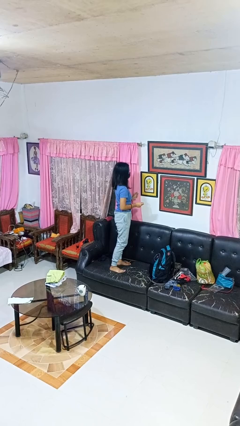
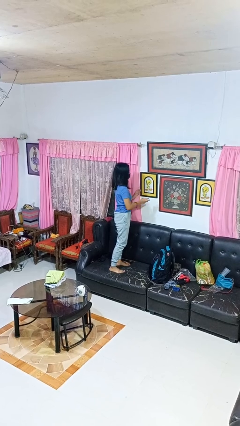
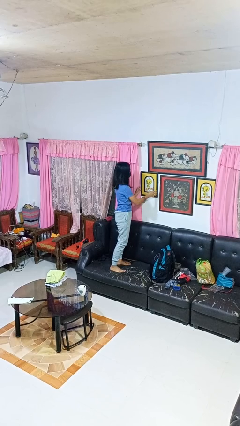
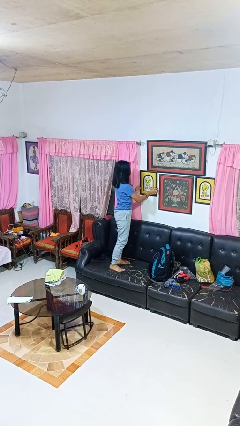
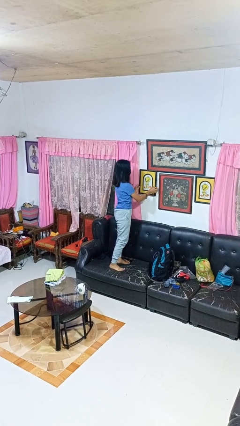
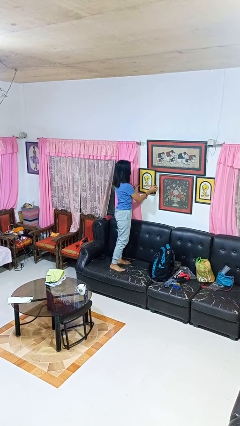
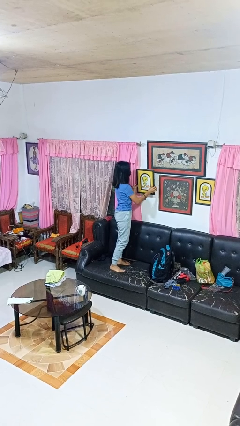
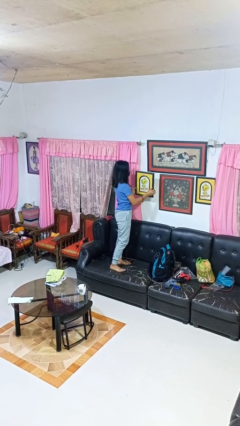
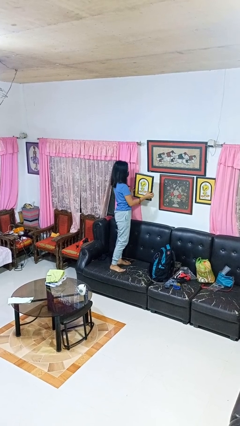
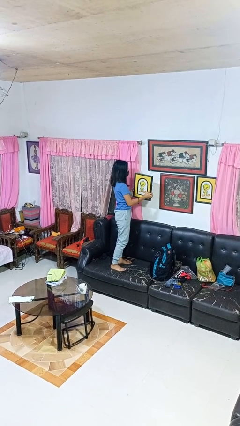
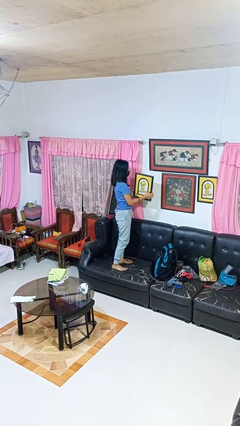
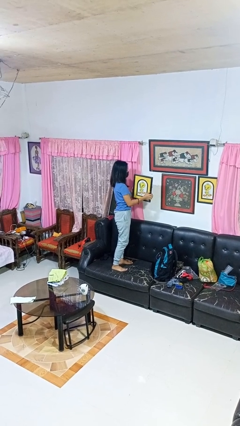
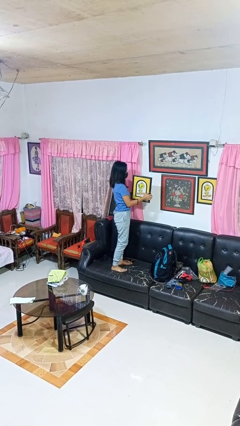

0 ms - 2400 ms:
person takes down picture frame

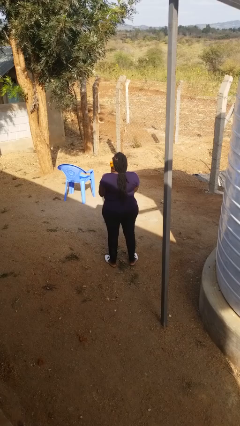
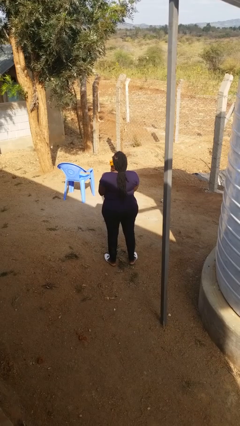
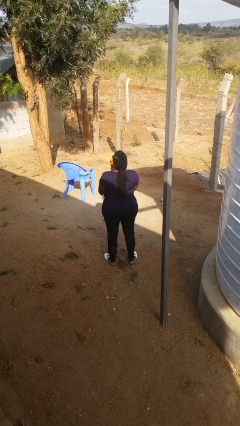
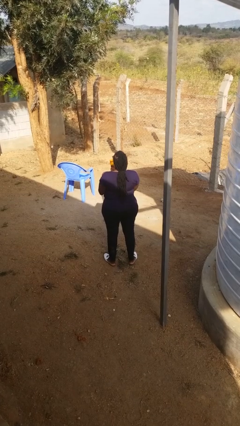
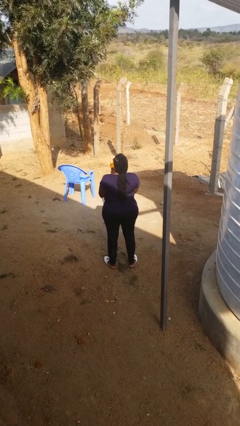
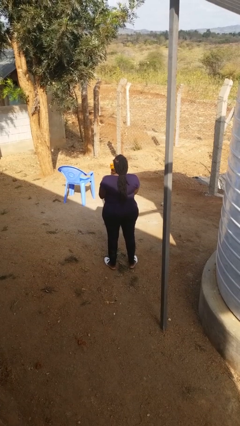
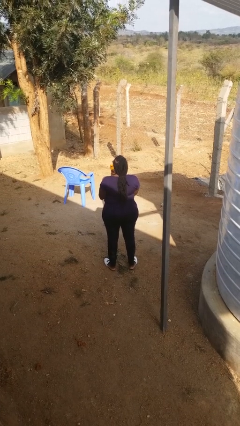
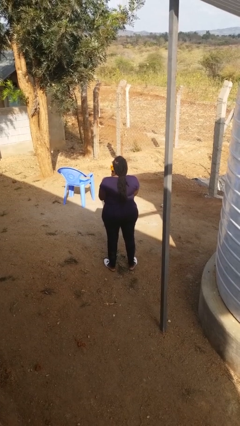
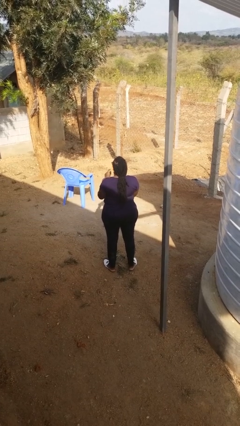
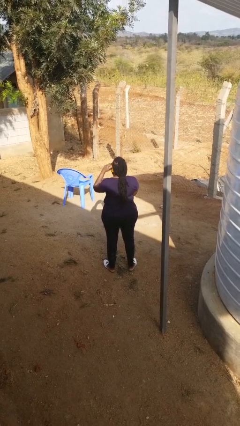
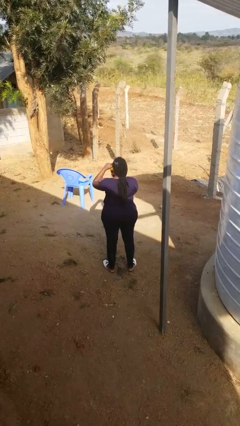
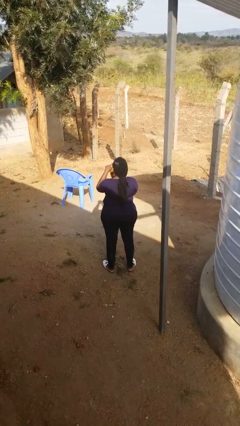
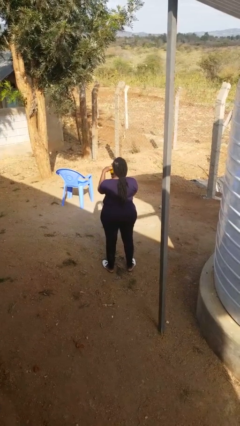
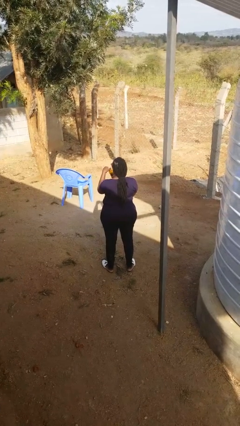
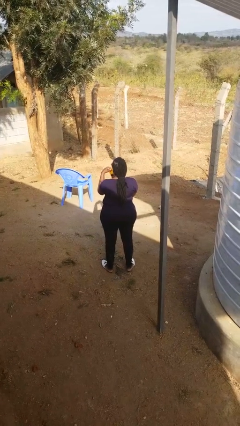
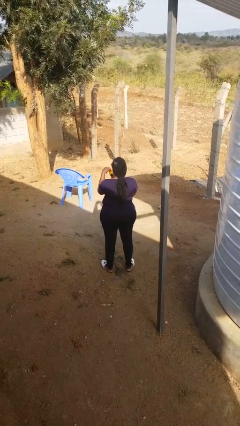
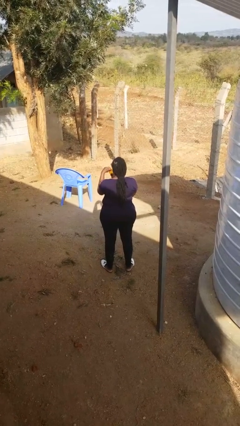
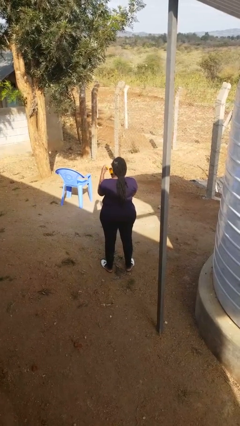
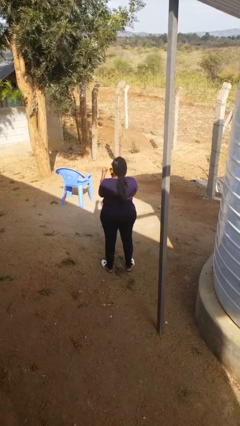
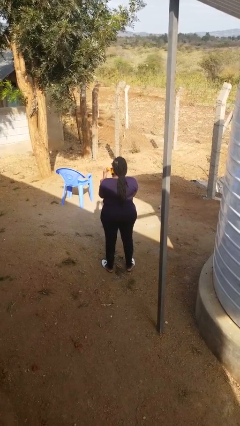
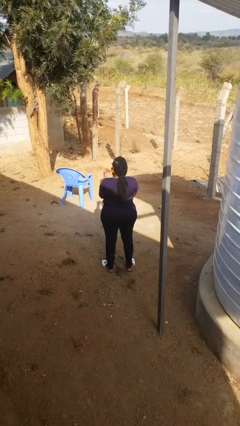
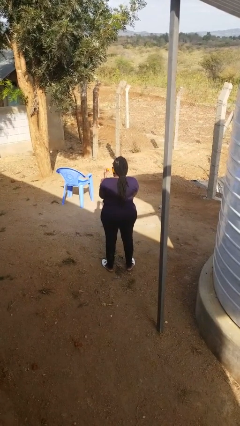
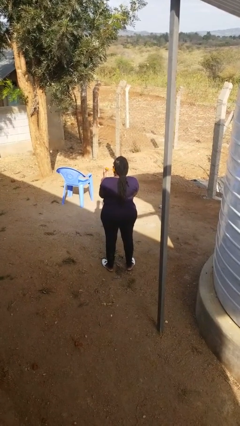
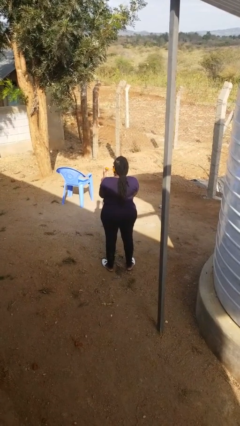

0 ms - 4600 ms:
person opens jar

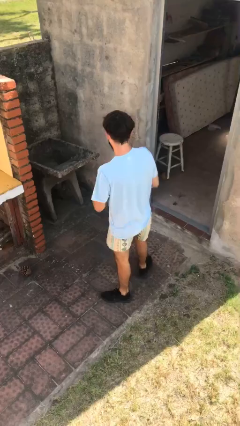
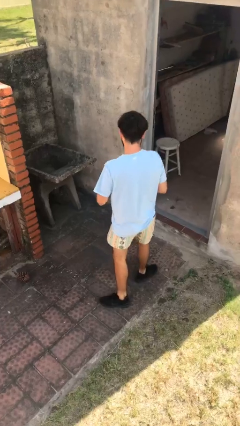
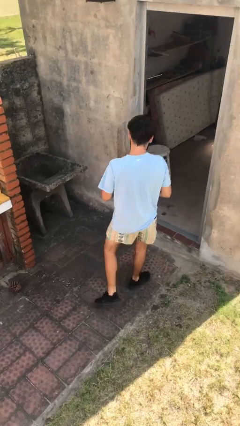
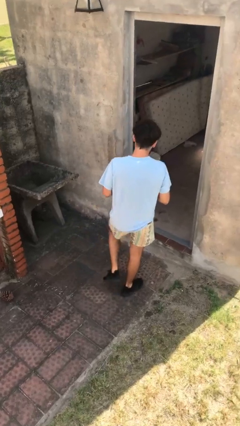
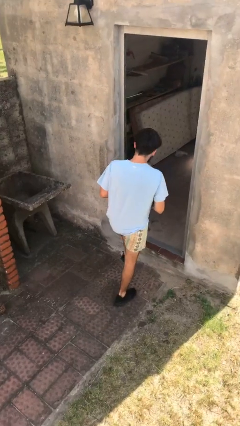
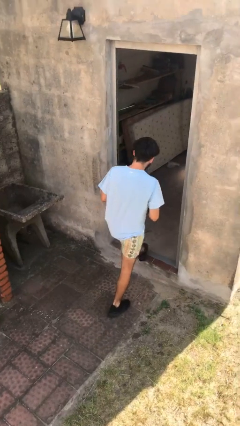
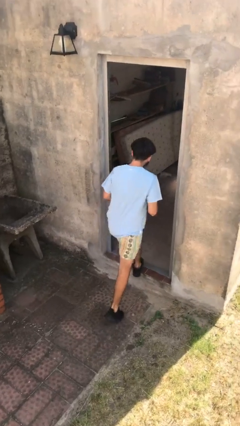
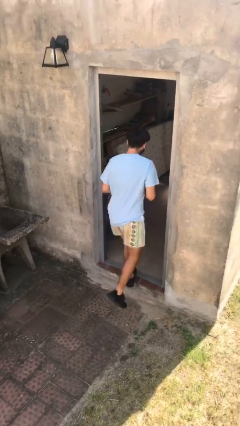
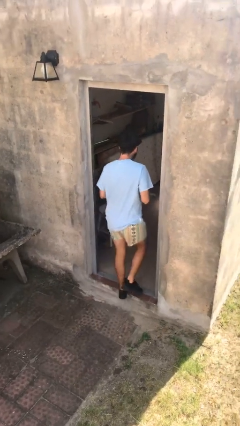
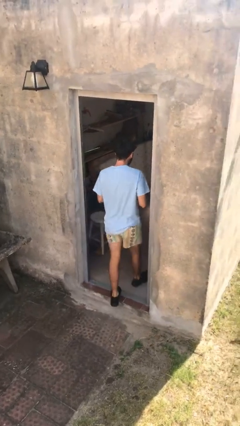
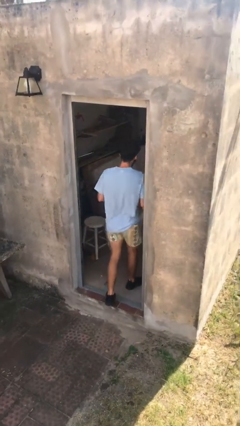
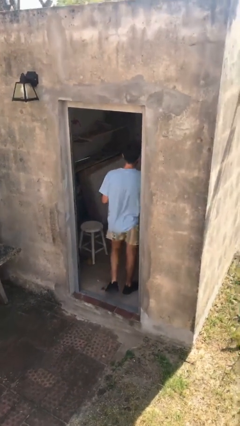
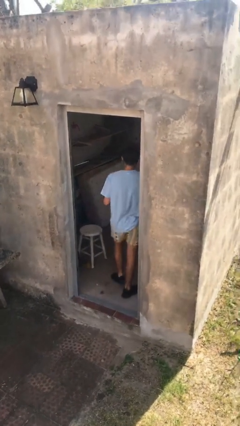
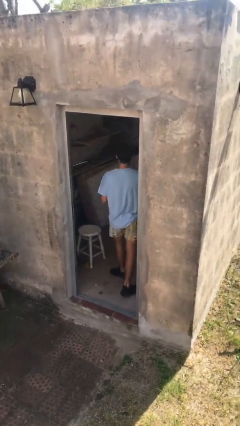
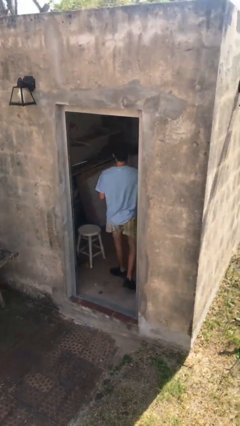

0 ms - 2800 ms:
person exits scene through structure

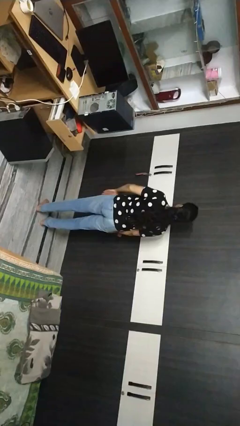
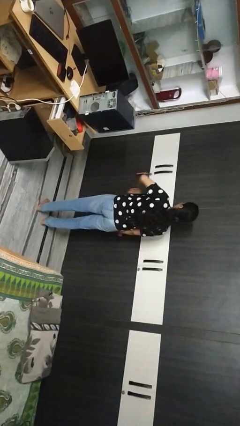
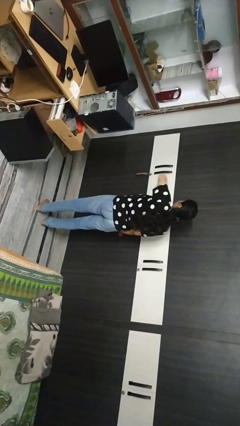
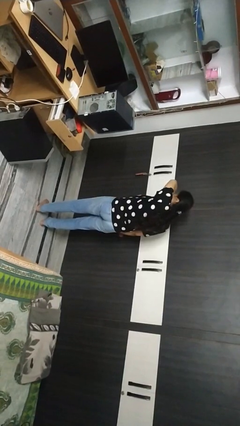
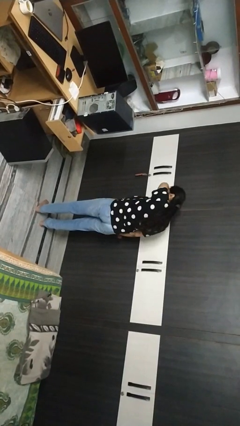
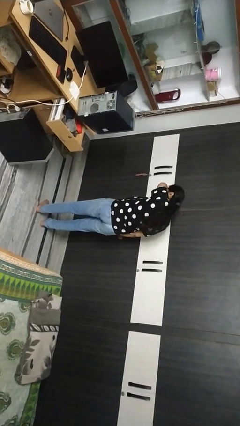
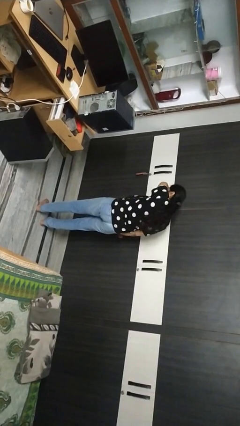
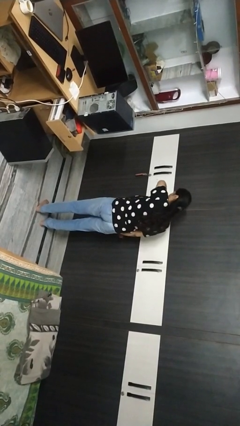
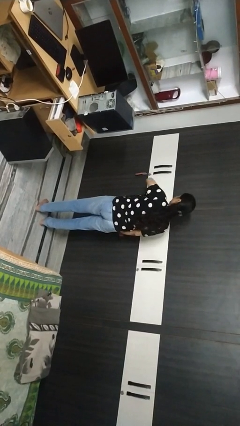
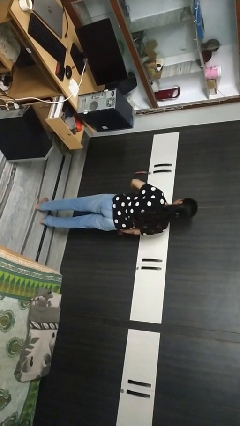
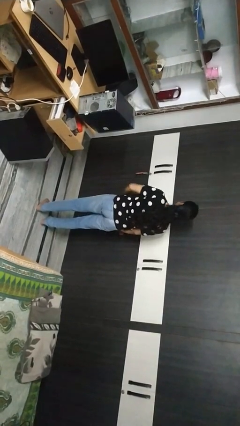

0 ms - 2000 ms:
person sneezes into arm

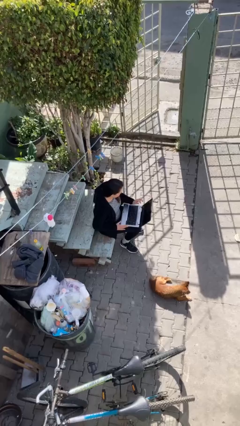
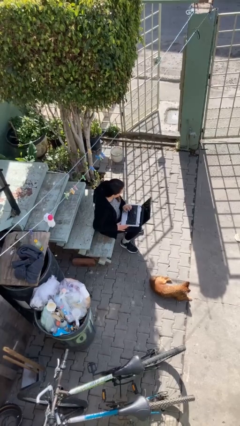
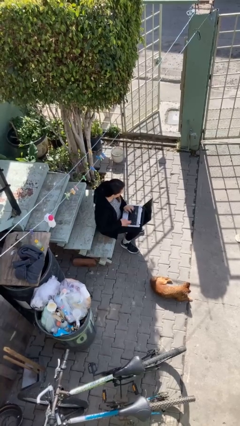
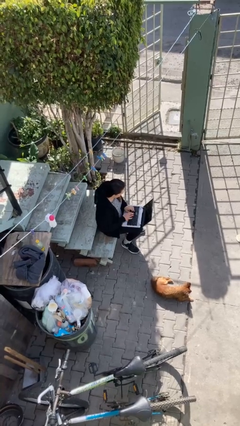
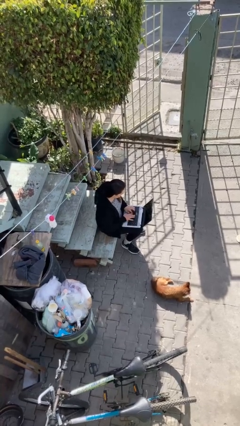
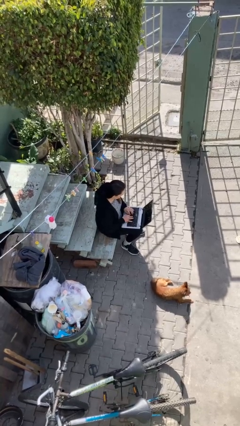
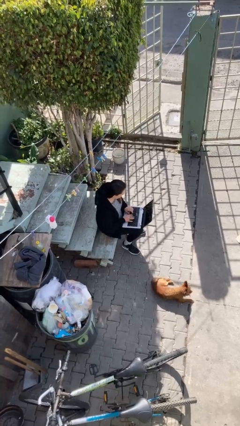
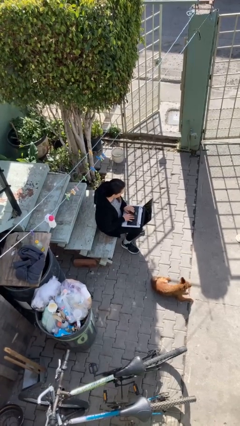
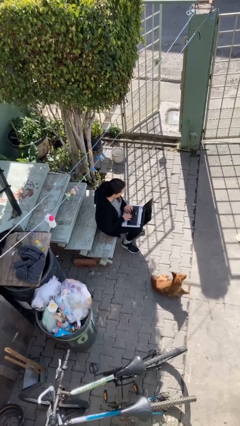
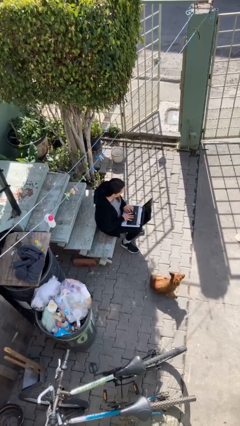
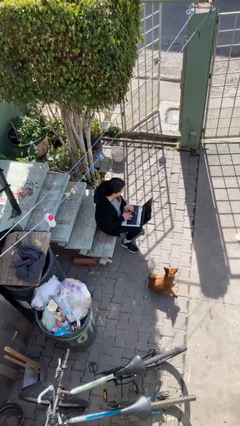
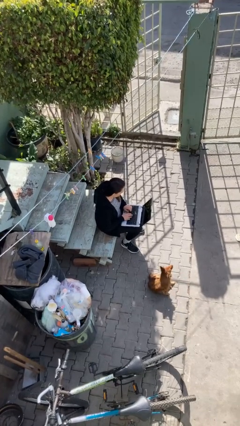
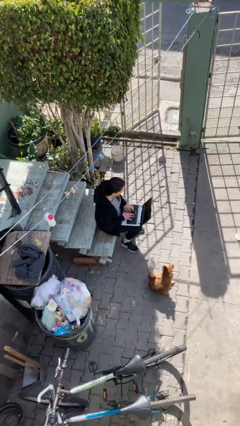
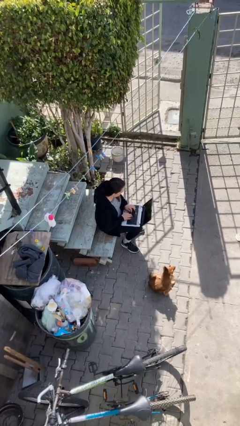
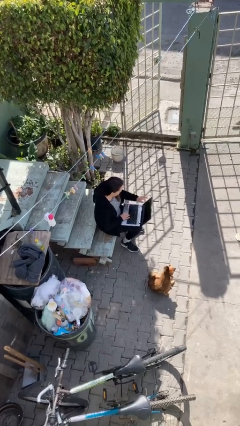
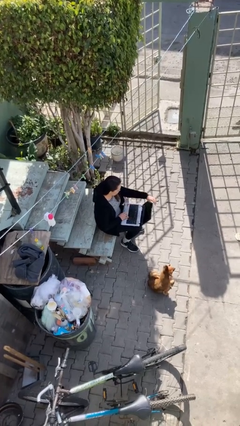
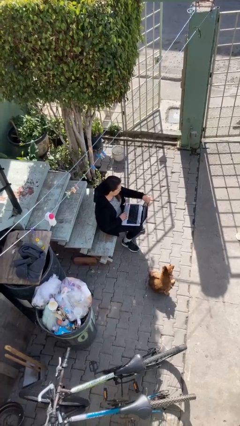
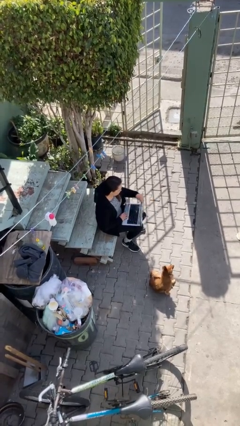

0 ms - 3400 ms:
person interacts with laptop

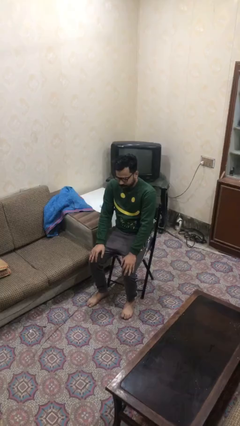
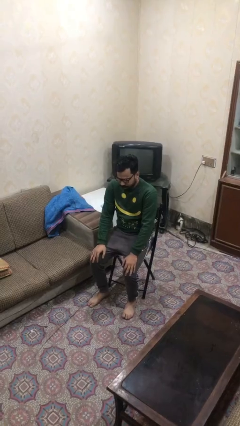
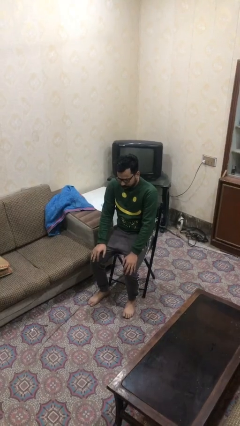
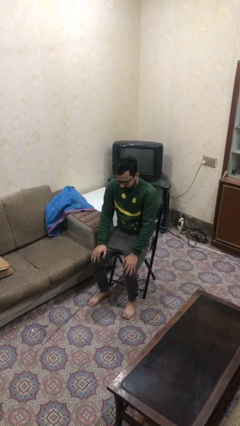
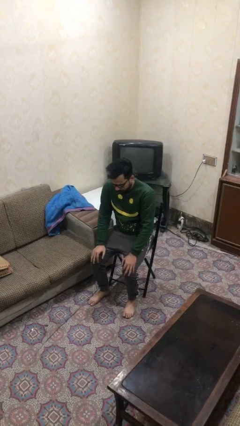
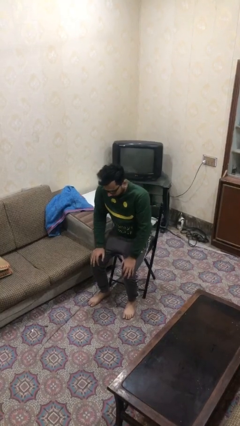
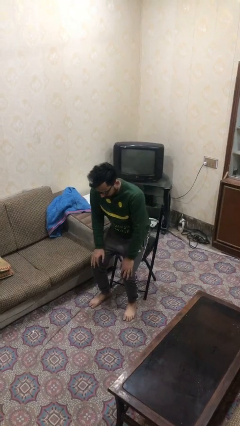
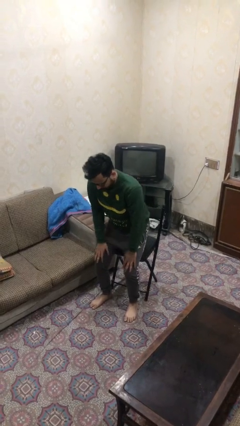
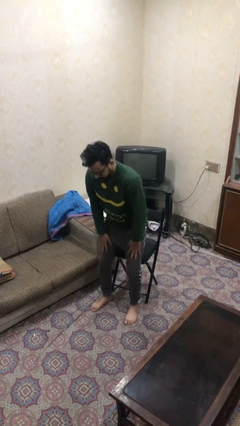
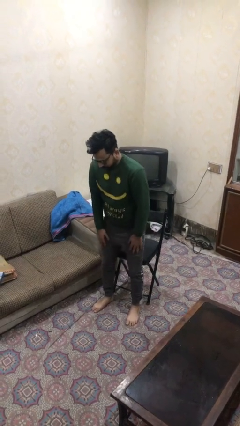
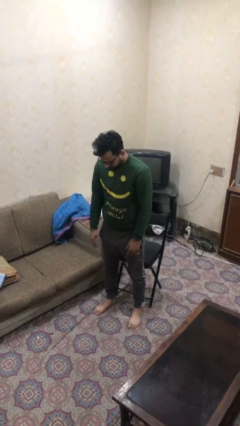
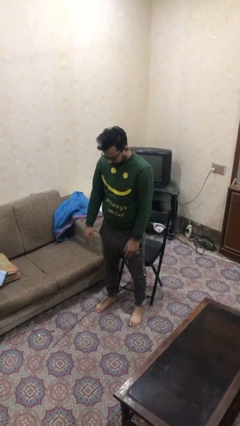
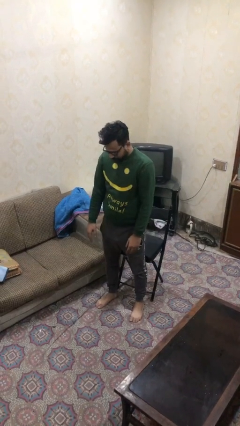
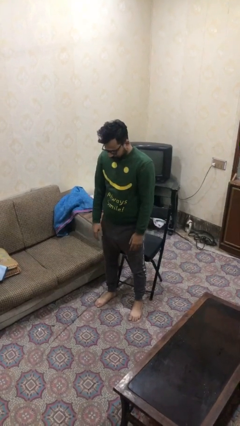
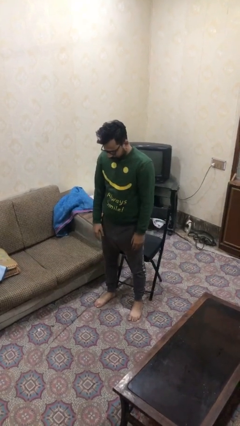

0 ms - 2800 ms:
person stands up
